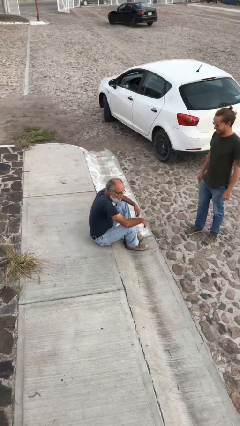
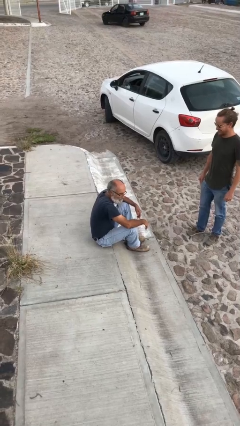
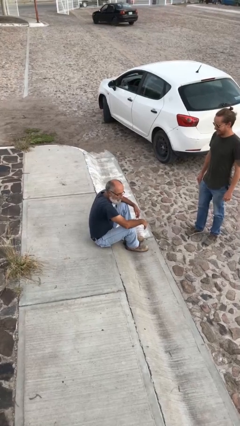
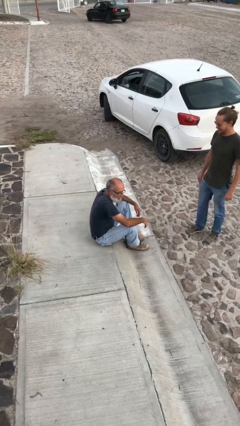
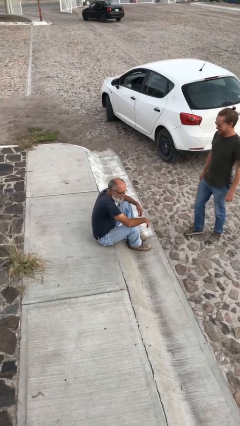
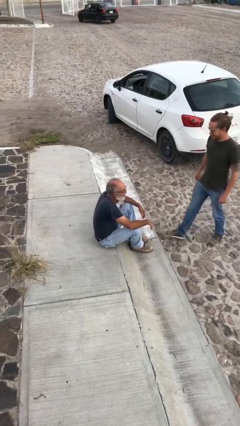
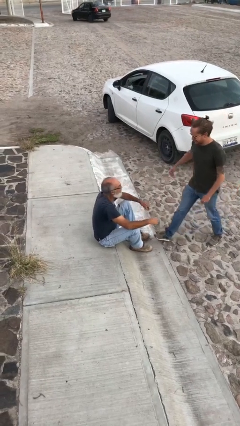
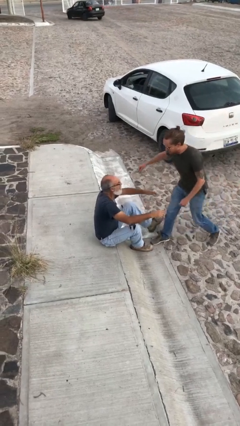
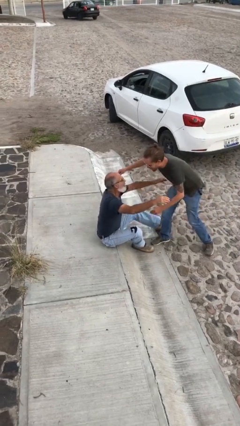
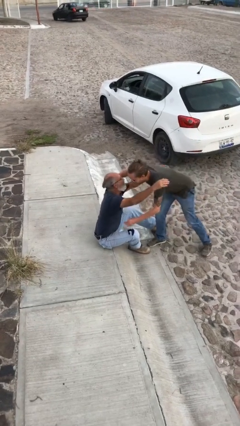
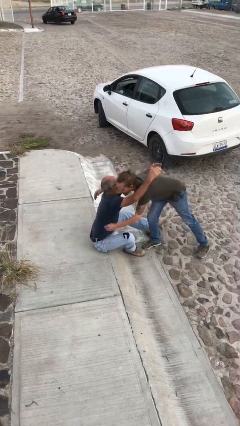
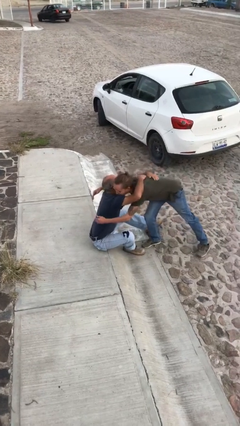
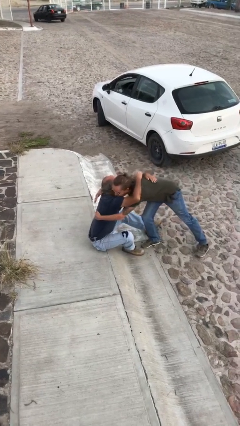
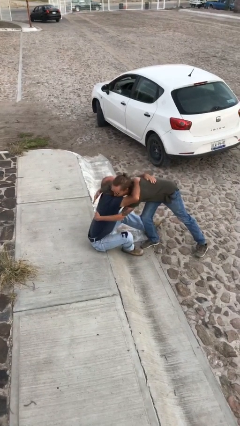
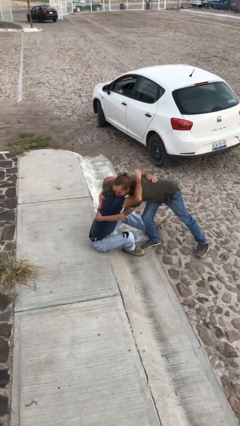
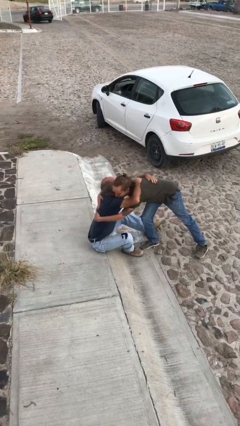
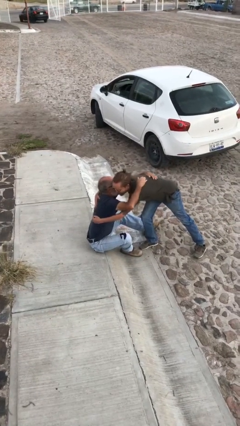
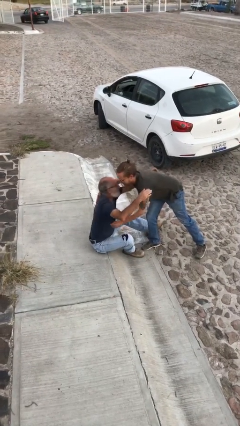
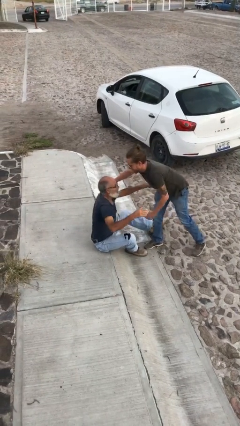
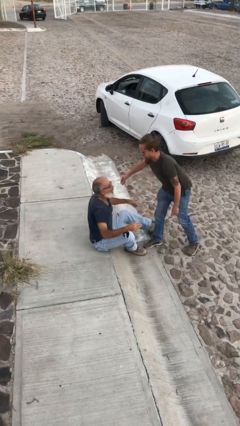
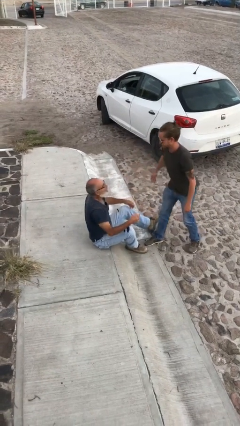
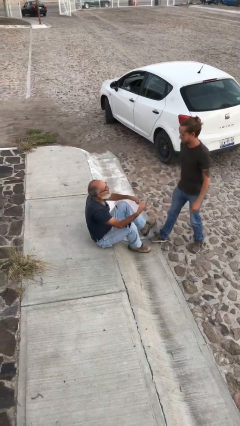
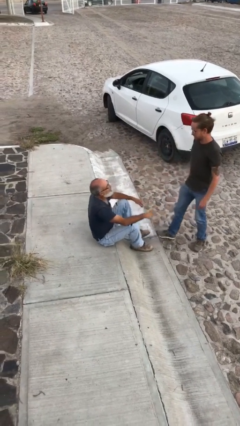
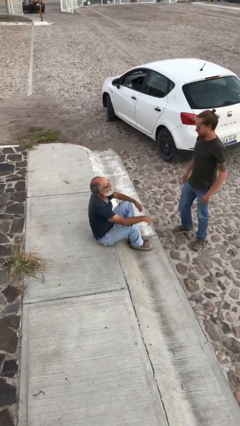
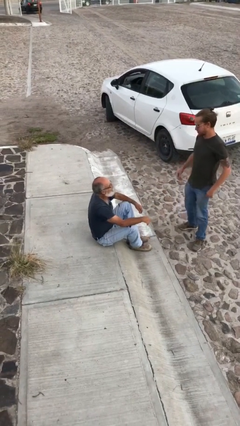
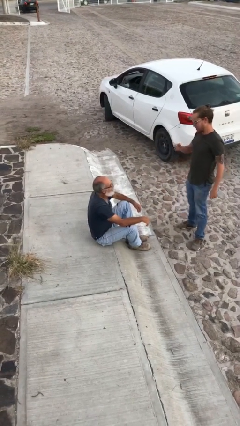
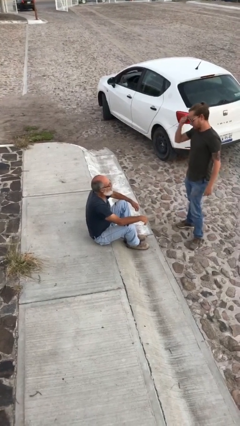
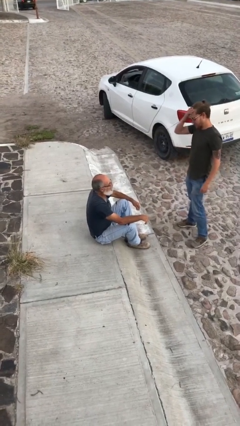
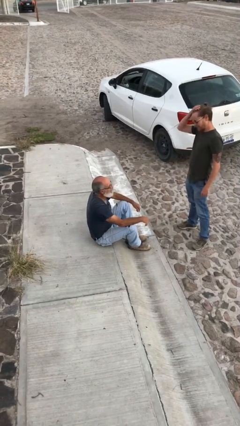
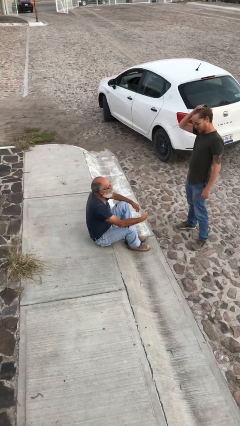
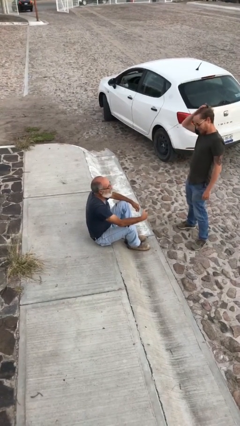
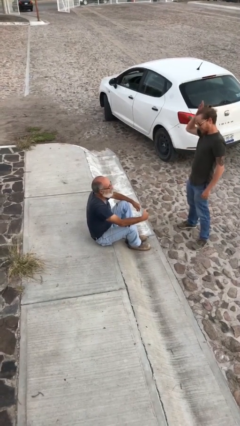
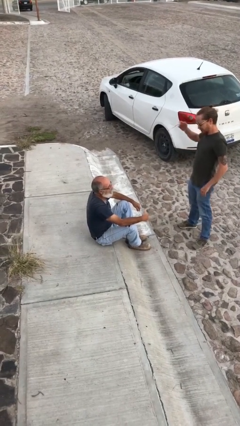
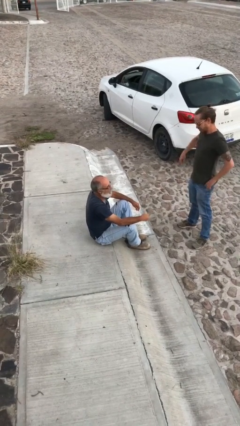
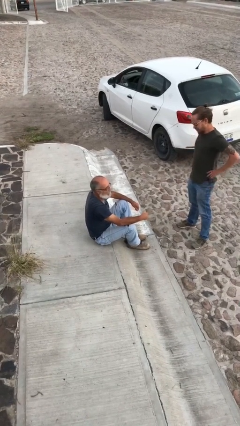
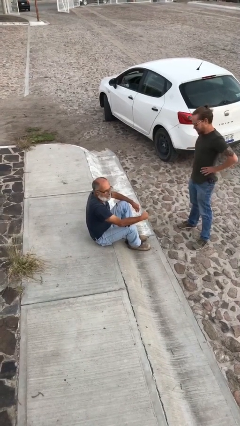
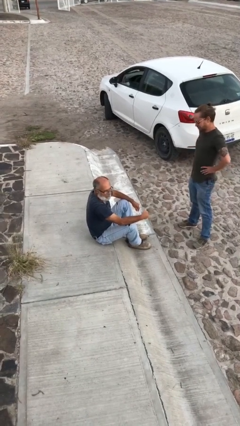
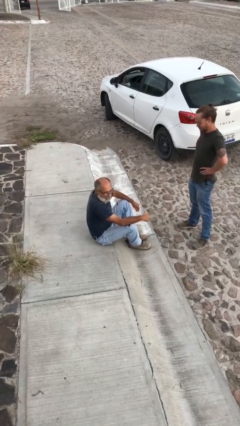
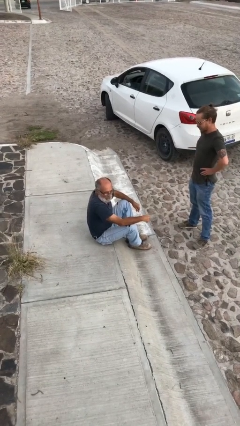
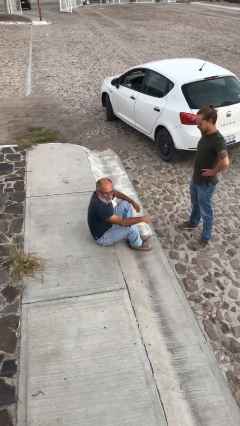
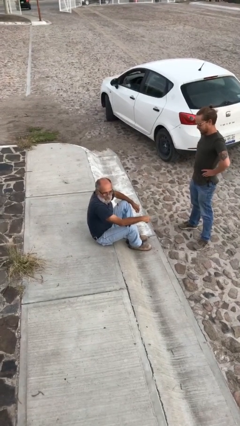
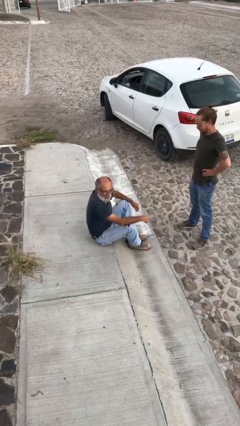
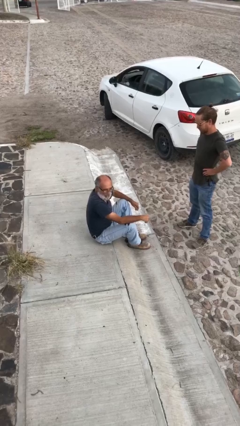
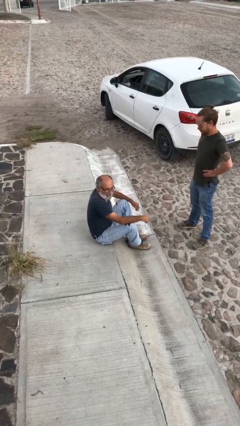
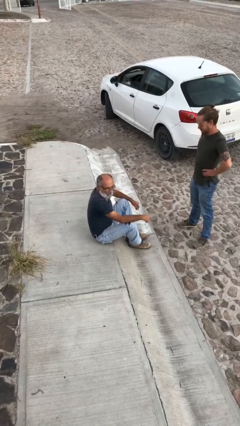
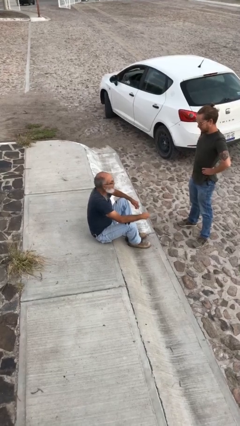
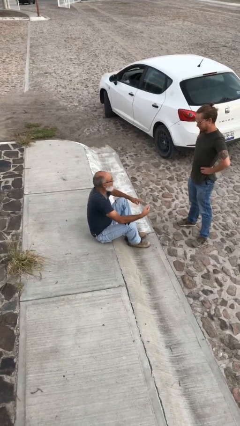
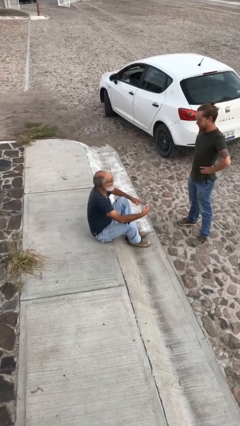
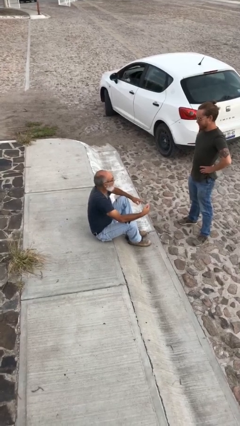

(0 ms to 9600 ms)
person embraces person

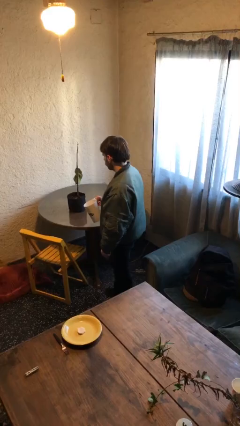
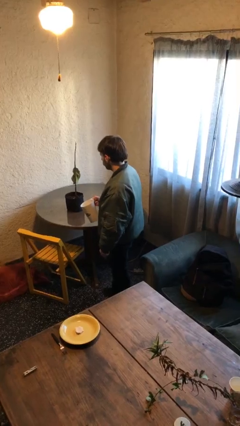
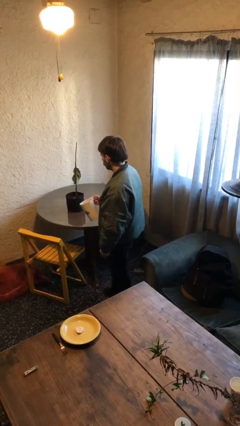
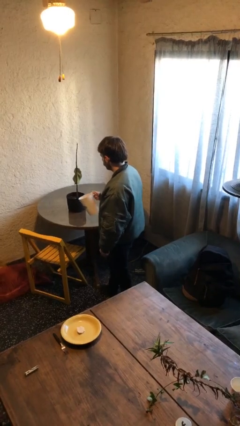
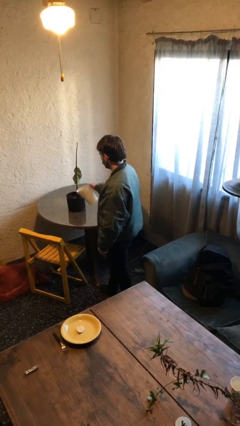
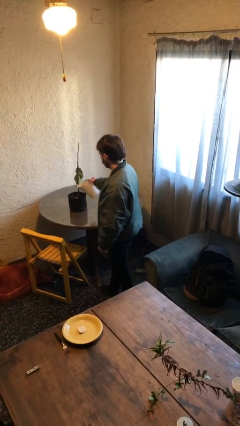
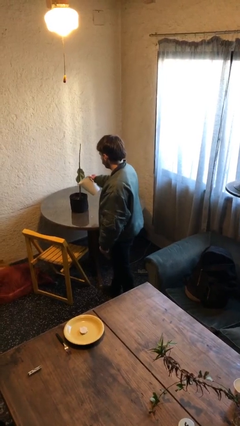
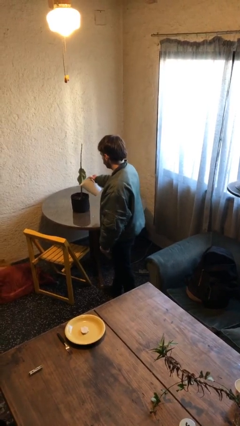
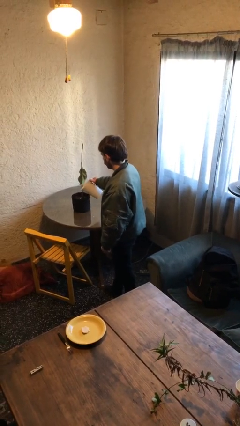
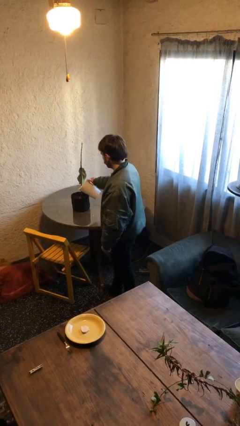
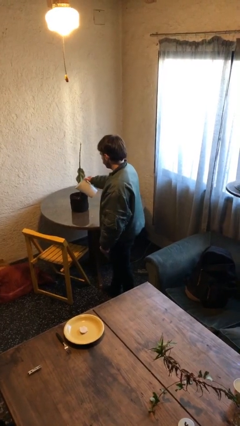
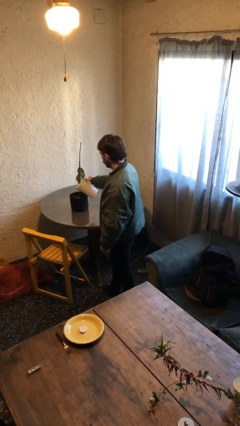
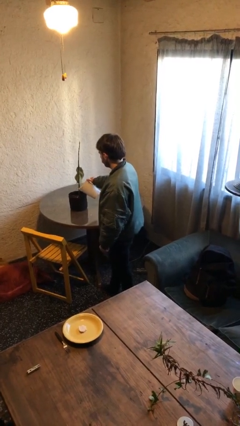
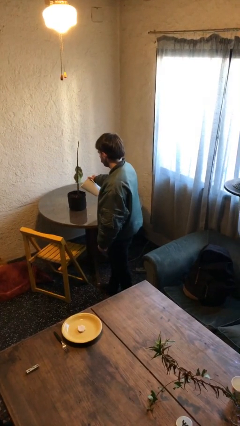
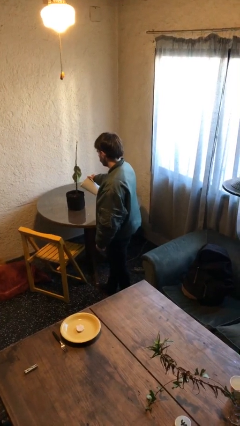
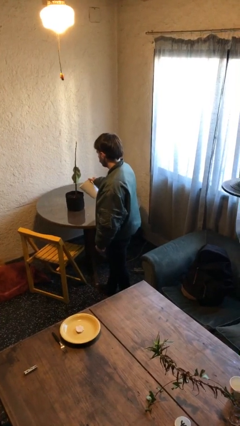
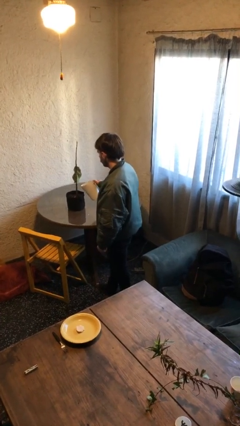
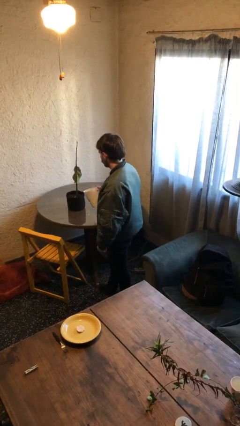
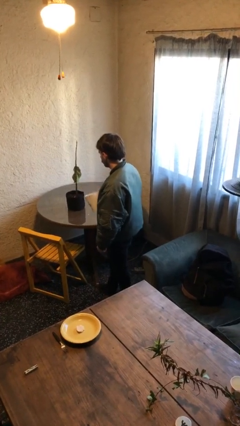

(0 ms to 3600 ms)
person waters houseplant

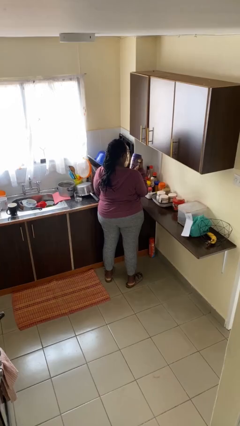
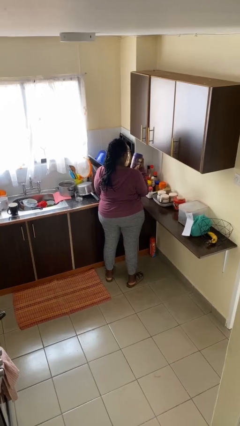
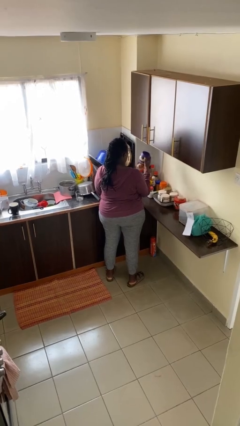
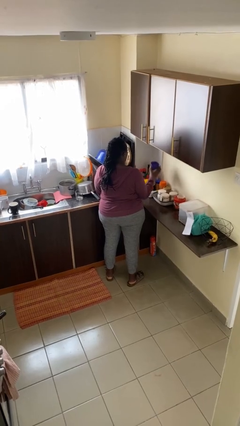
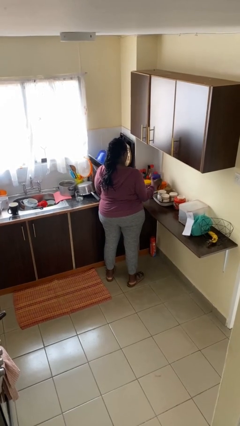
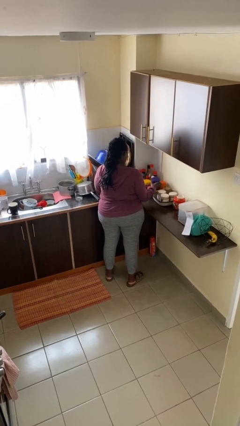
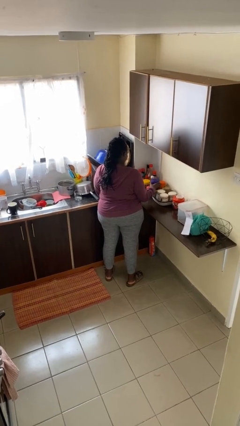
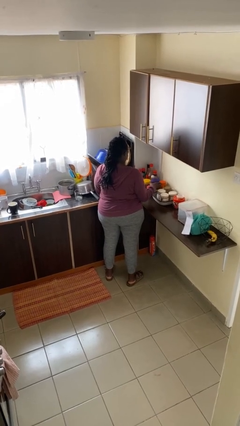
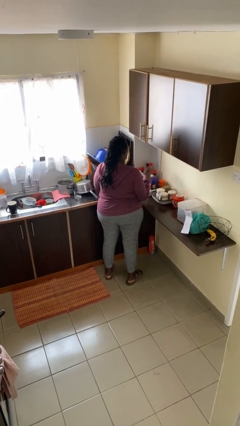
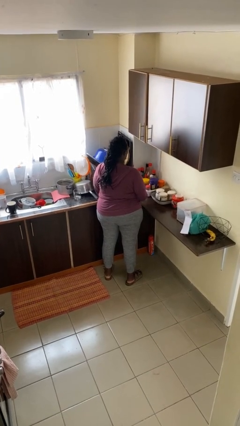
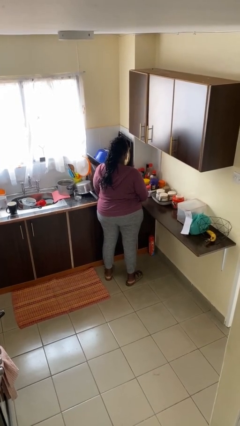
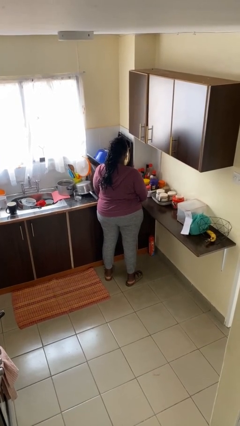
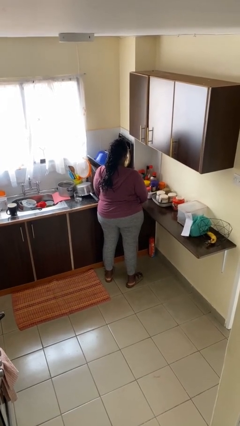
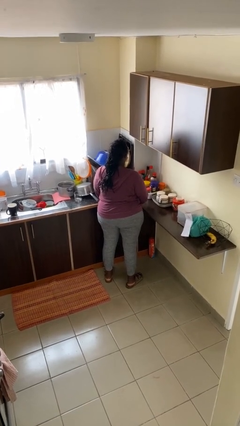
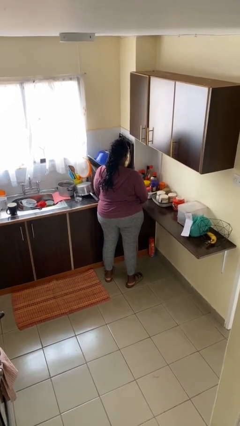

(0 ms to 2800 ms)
person puts down object on countertop

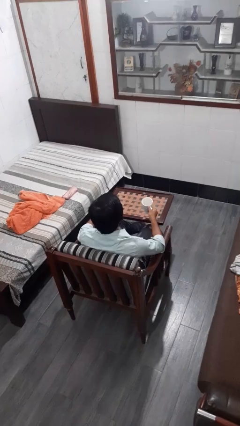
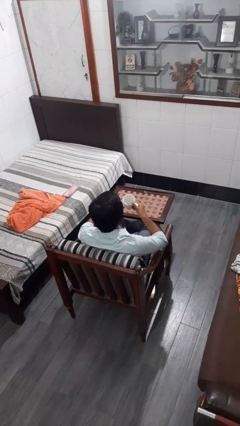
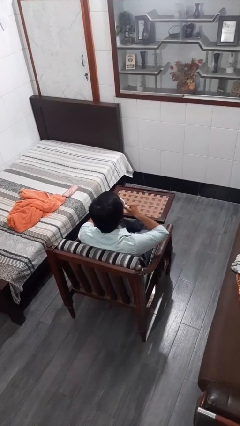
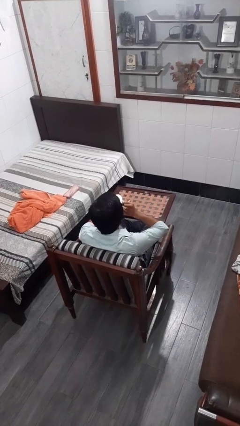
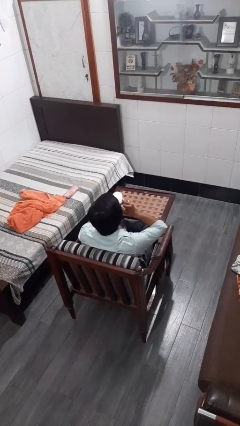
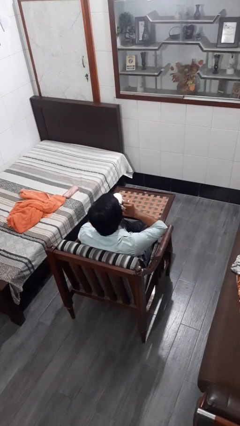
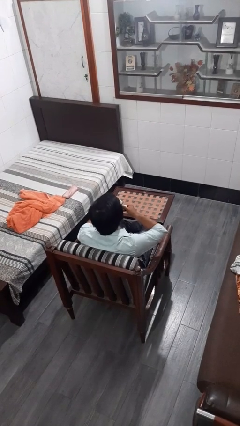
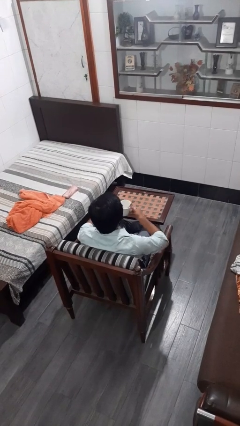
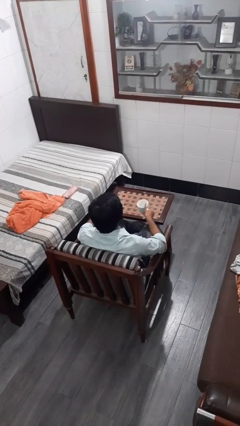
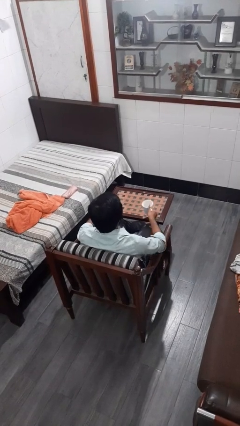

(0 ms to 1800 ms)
person drinks from mug
